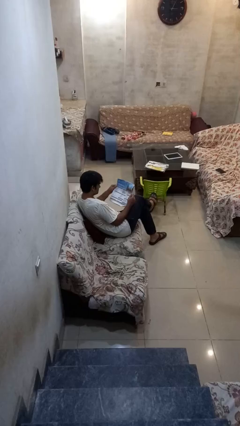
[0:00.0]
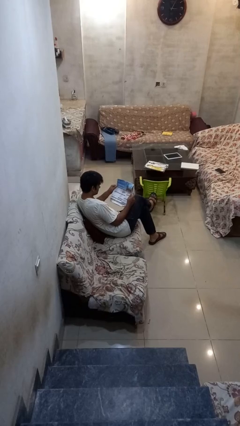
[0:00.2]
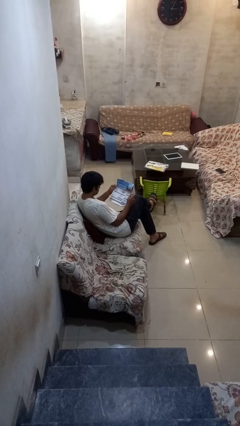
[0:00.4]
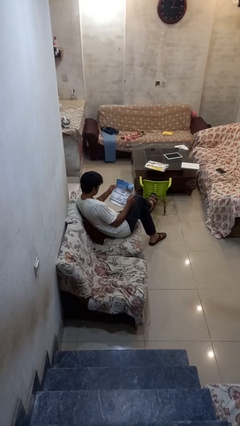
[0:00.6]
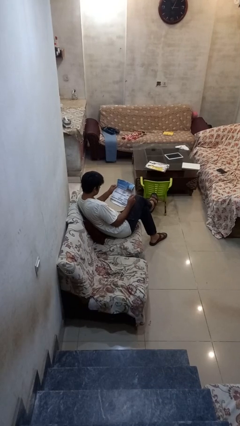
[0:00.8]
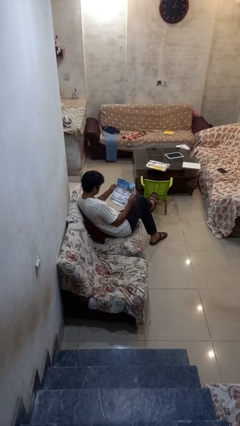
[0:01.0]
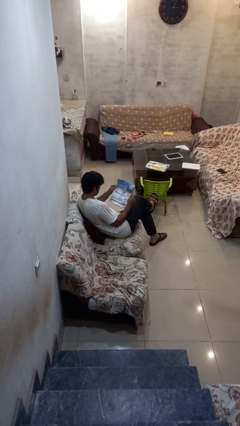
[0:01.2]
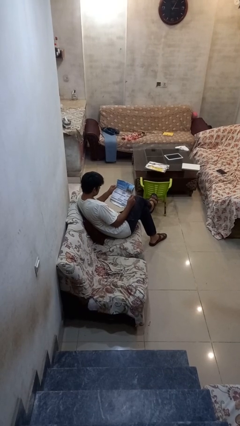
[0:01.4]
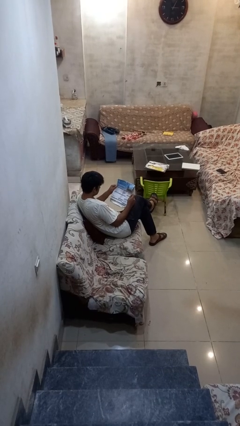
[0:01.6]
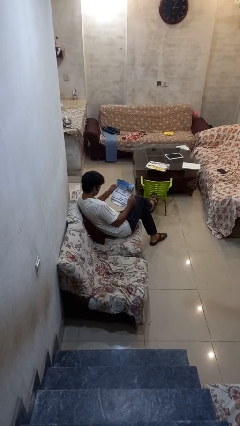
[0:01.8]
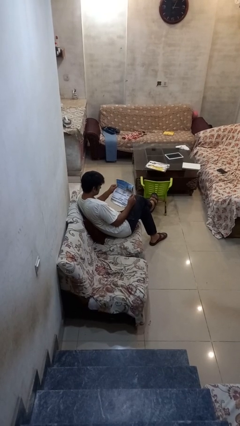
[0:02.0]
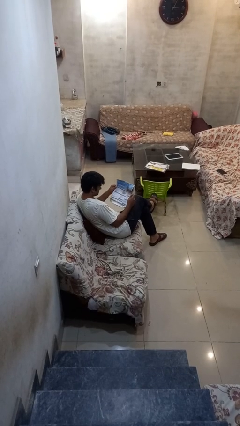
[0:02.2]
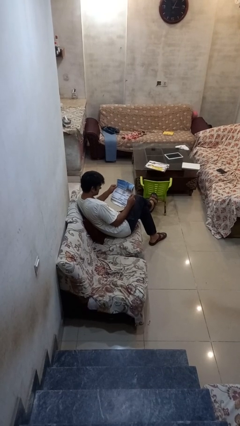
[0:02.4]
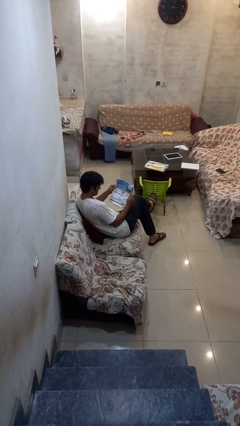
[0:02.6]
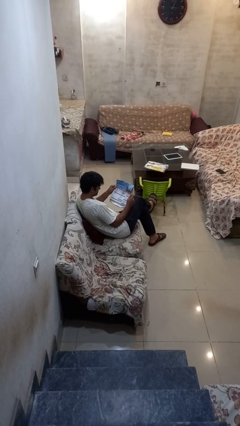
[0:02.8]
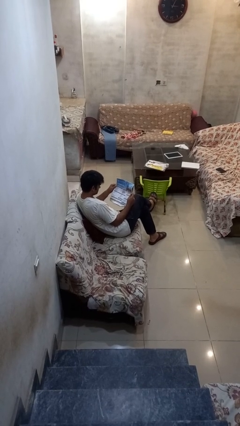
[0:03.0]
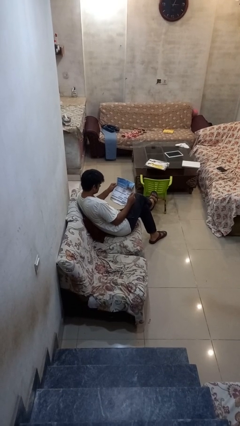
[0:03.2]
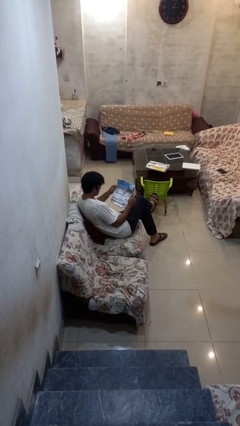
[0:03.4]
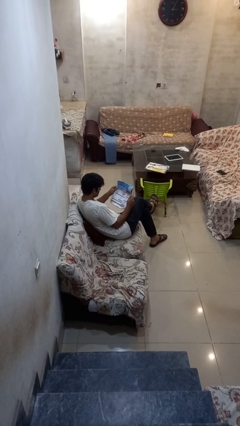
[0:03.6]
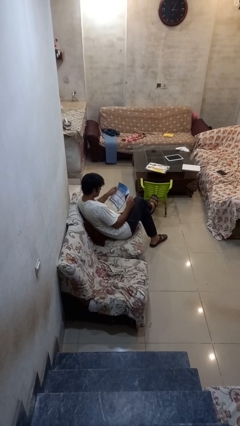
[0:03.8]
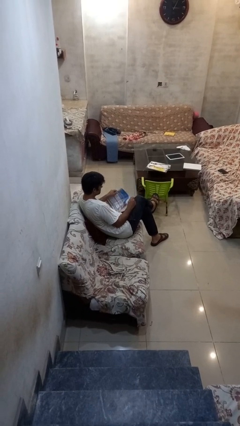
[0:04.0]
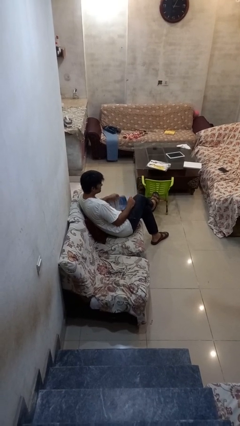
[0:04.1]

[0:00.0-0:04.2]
person reads newspaper

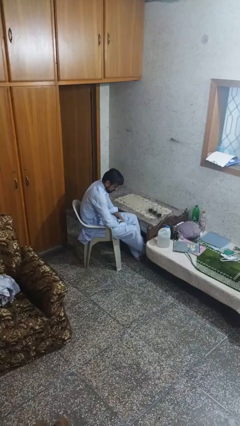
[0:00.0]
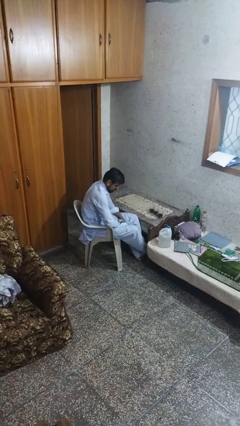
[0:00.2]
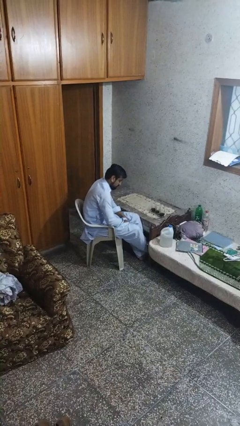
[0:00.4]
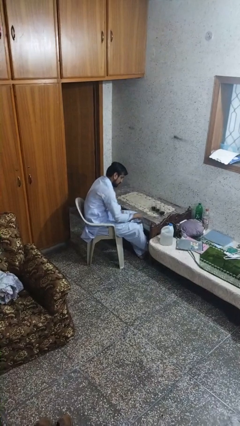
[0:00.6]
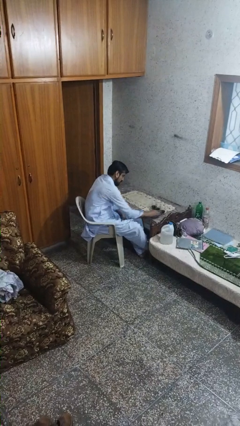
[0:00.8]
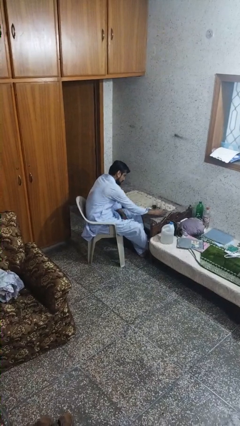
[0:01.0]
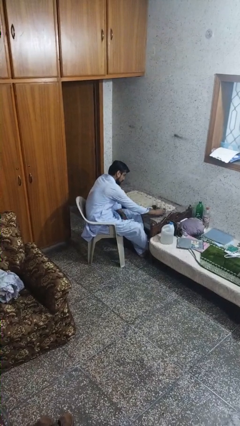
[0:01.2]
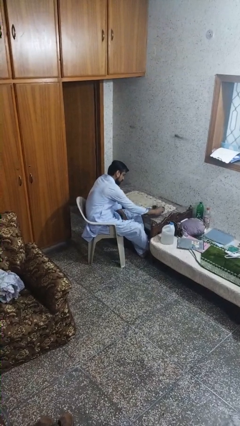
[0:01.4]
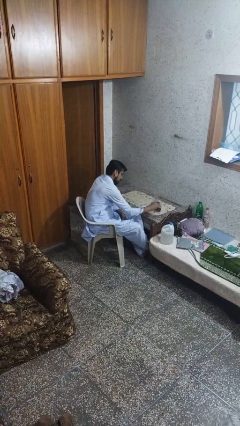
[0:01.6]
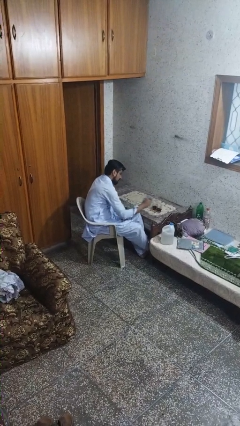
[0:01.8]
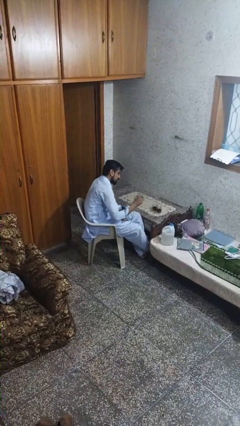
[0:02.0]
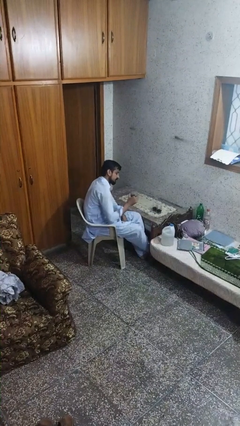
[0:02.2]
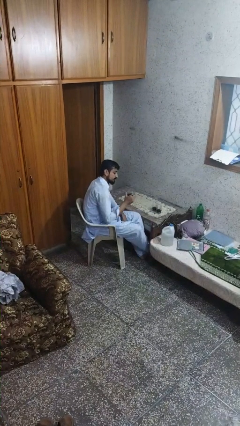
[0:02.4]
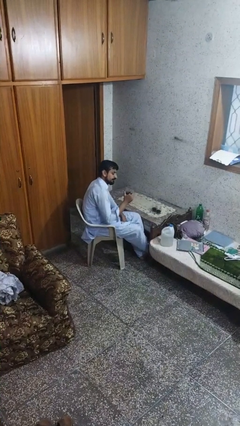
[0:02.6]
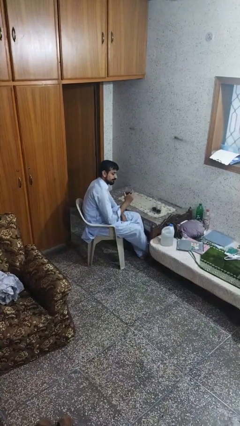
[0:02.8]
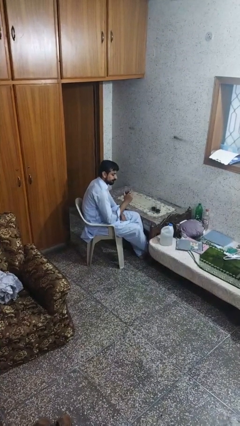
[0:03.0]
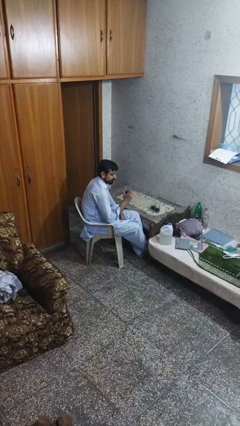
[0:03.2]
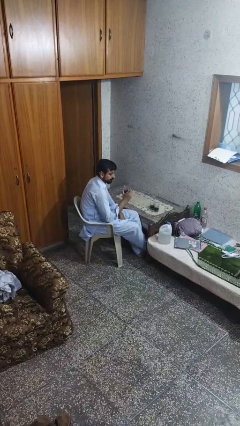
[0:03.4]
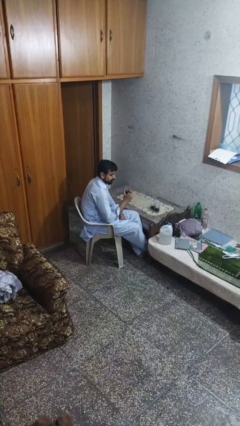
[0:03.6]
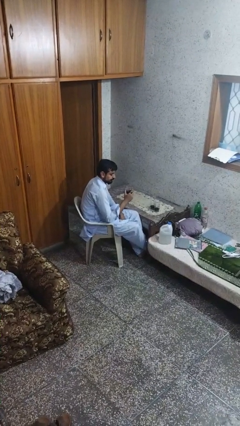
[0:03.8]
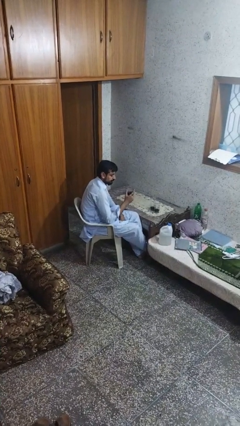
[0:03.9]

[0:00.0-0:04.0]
person picks up object from table

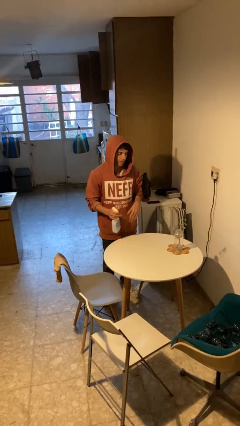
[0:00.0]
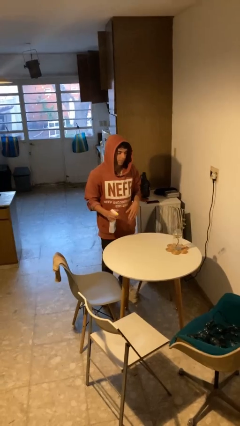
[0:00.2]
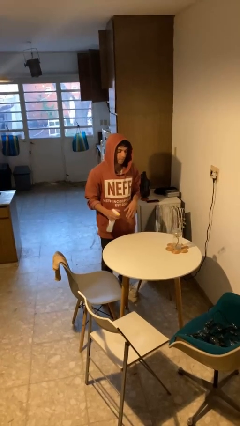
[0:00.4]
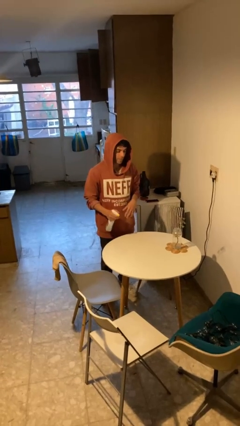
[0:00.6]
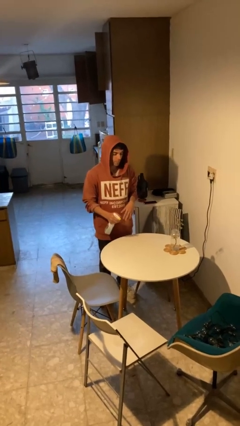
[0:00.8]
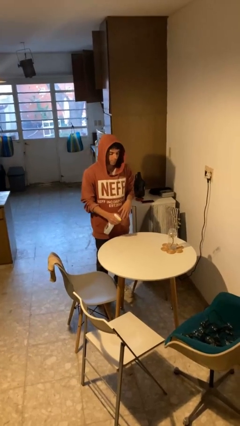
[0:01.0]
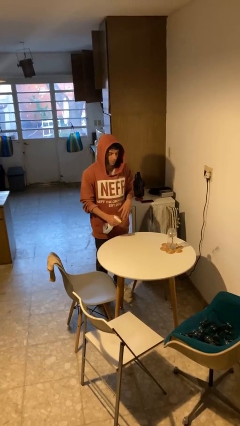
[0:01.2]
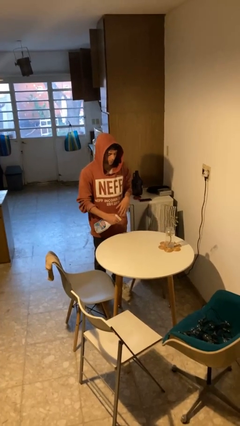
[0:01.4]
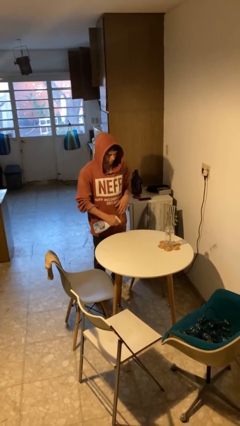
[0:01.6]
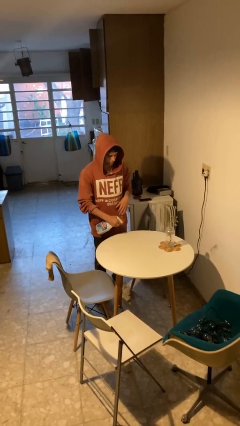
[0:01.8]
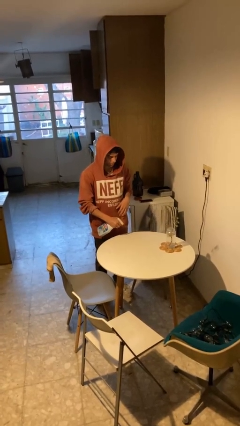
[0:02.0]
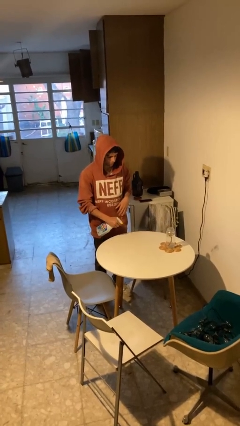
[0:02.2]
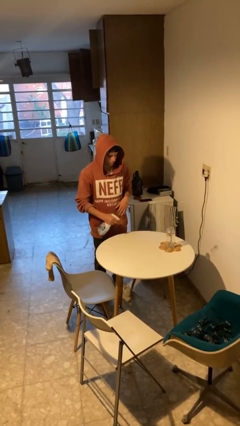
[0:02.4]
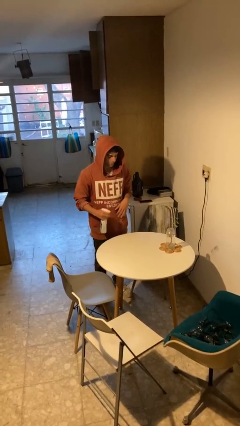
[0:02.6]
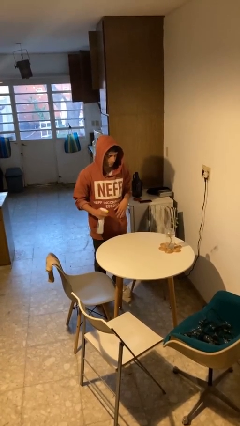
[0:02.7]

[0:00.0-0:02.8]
person sprays from bottle

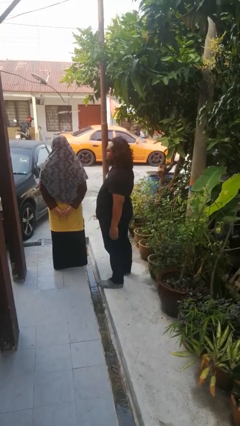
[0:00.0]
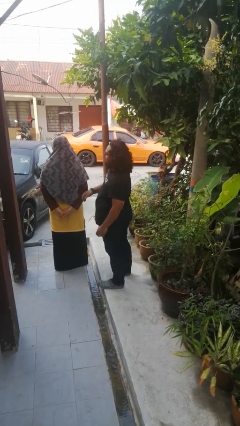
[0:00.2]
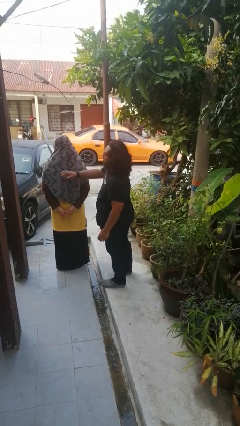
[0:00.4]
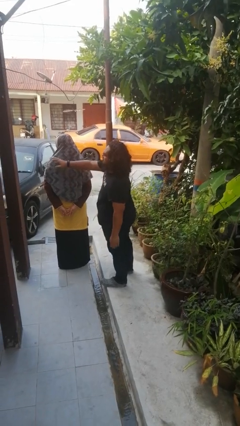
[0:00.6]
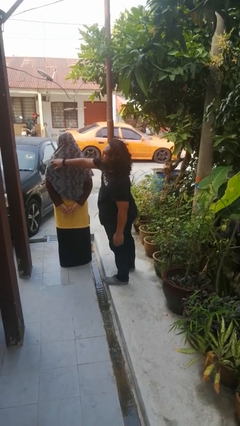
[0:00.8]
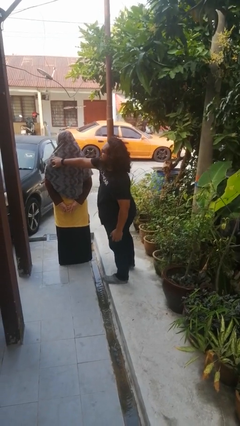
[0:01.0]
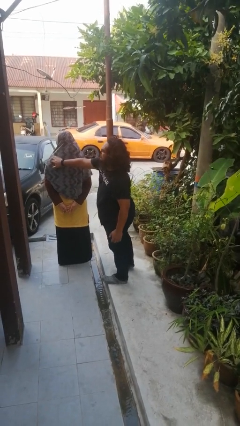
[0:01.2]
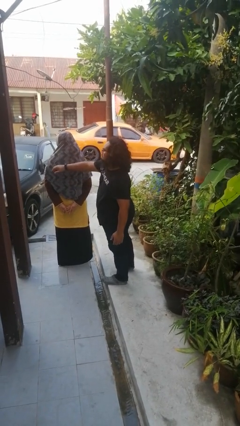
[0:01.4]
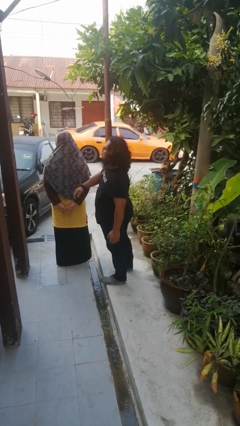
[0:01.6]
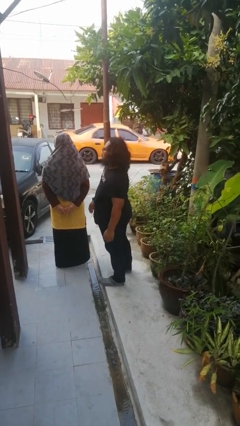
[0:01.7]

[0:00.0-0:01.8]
person touches back of person

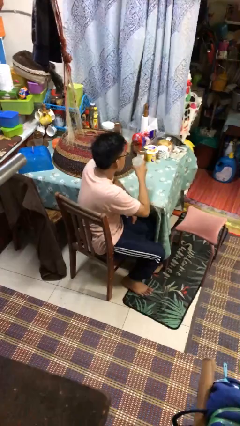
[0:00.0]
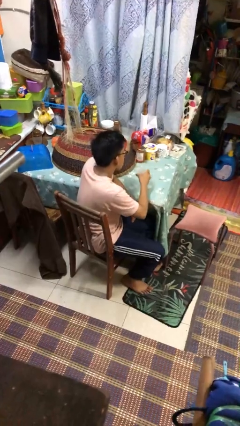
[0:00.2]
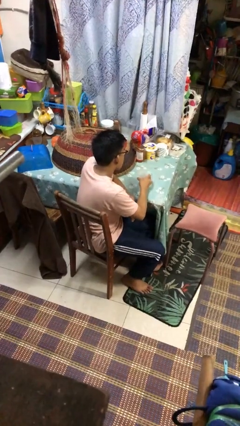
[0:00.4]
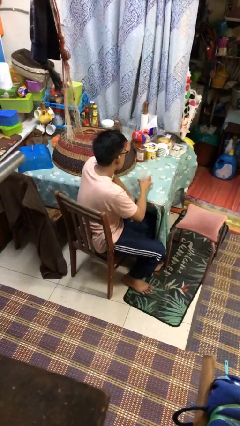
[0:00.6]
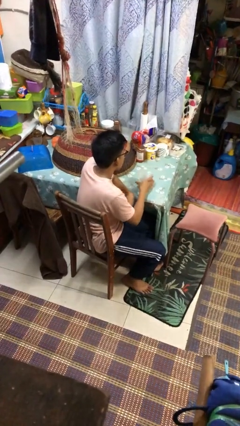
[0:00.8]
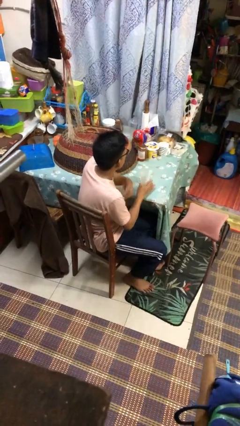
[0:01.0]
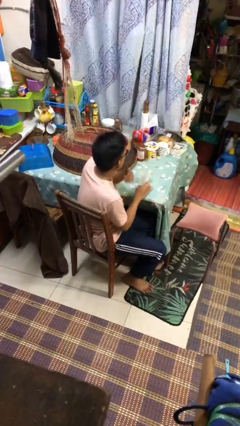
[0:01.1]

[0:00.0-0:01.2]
person puts down object on table

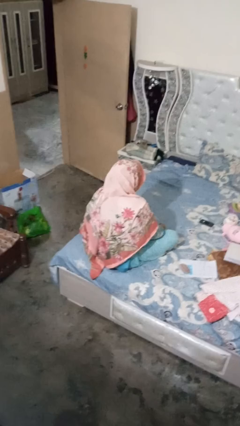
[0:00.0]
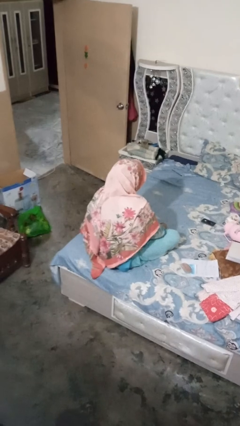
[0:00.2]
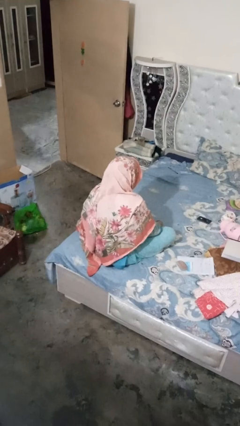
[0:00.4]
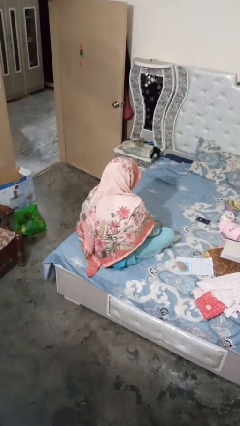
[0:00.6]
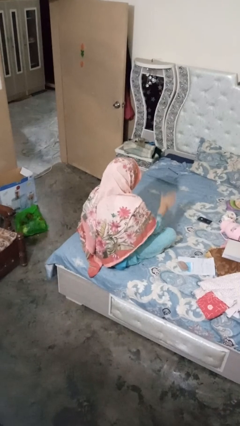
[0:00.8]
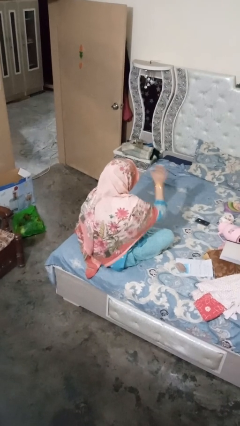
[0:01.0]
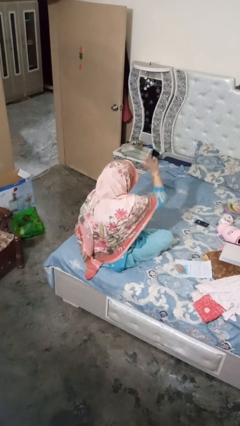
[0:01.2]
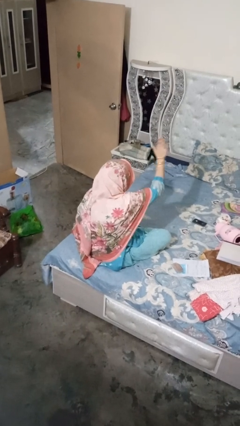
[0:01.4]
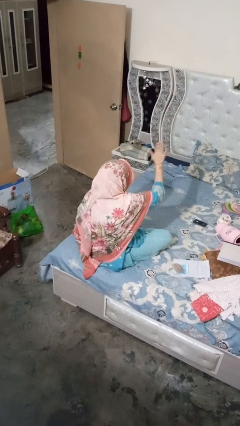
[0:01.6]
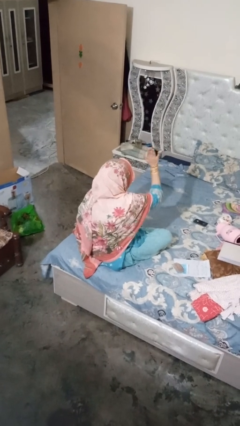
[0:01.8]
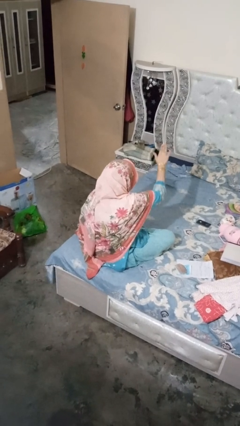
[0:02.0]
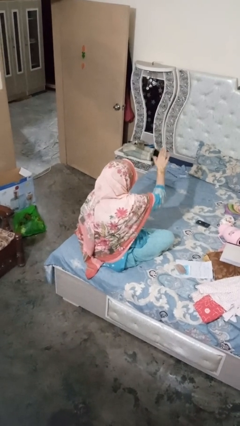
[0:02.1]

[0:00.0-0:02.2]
person gestures stop

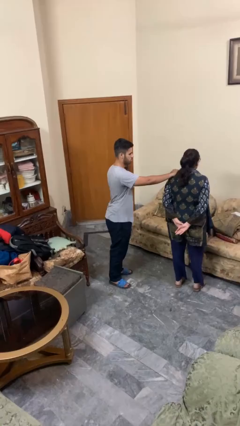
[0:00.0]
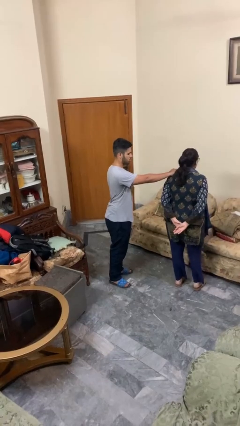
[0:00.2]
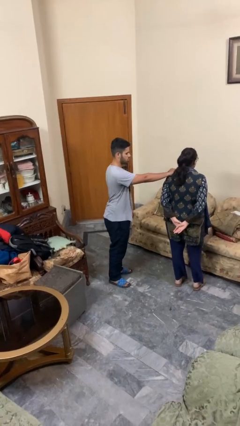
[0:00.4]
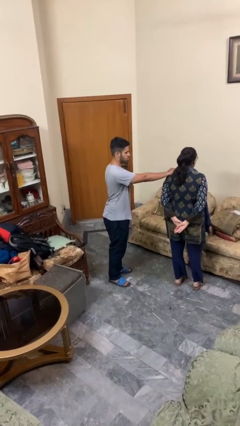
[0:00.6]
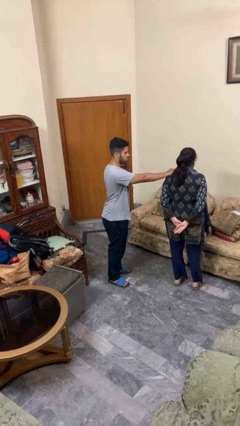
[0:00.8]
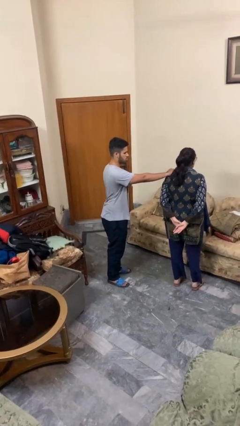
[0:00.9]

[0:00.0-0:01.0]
person grabs person by shoulder

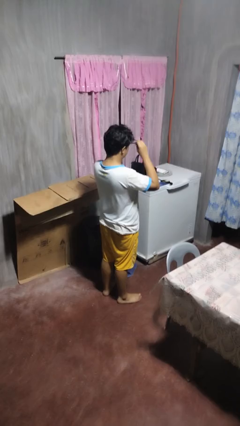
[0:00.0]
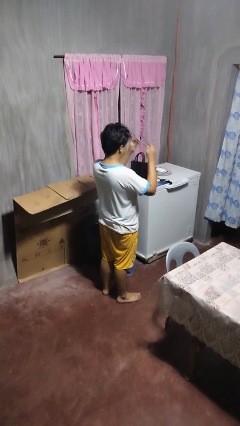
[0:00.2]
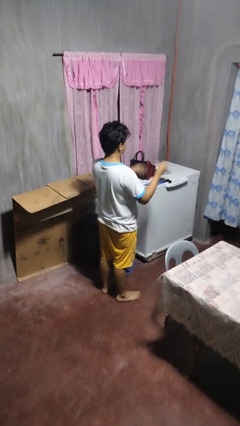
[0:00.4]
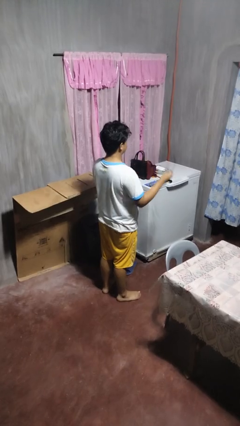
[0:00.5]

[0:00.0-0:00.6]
person takes off glasses
